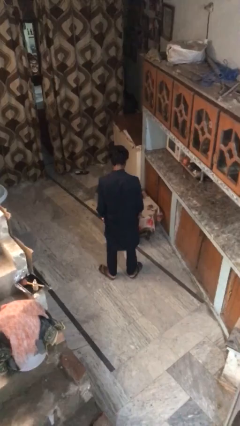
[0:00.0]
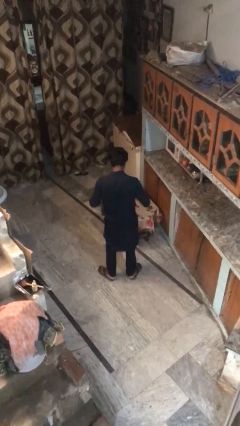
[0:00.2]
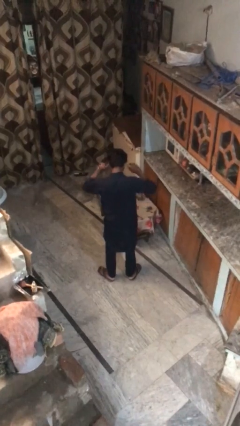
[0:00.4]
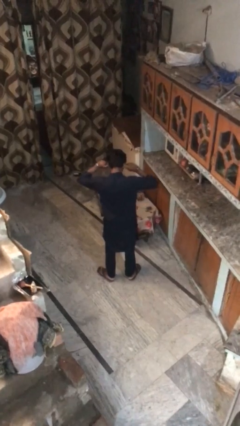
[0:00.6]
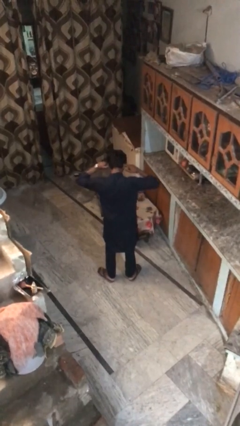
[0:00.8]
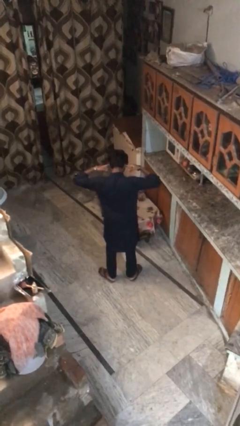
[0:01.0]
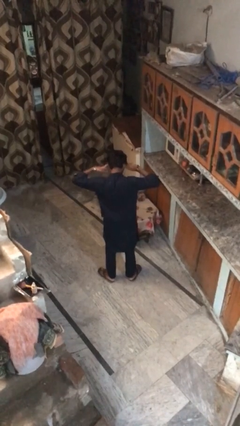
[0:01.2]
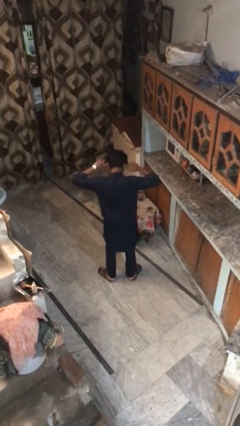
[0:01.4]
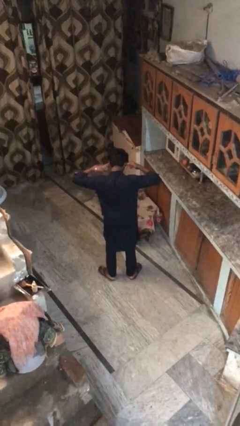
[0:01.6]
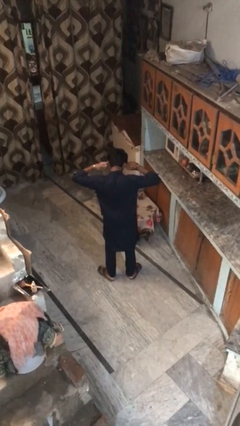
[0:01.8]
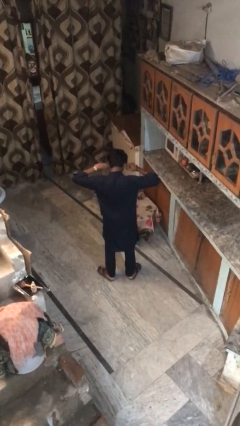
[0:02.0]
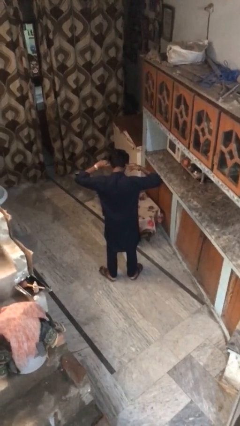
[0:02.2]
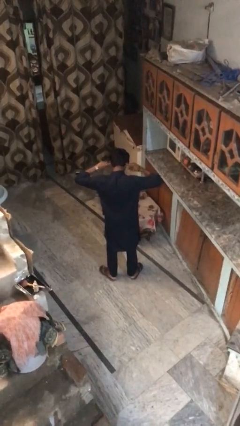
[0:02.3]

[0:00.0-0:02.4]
person puts fingers in ear

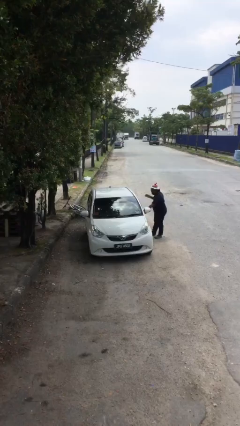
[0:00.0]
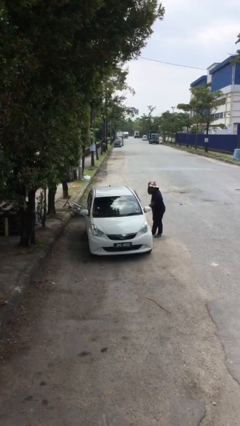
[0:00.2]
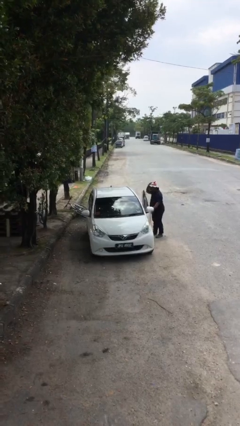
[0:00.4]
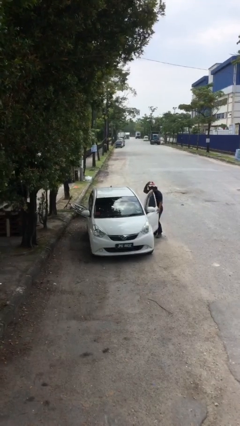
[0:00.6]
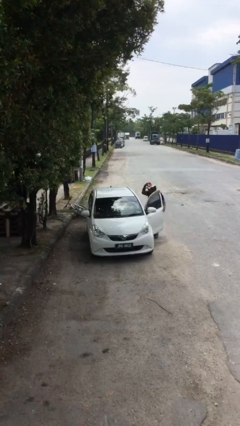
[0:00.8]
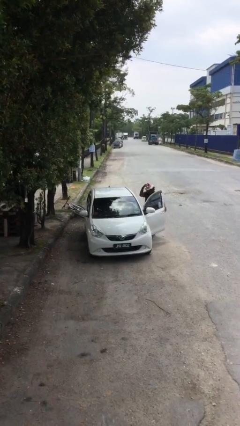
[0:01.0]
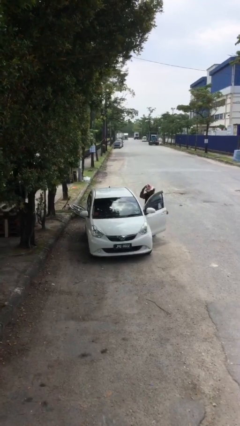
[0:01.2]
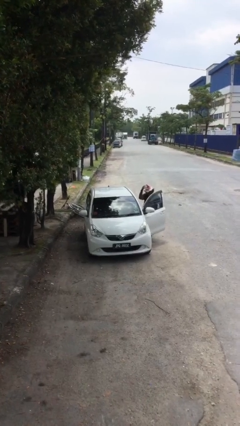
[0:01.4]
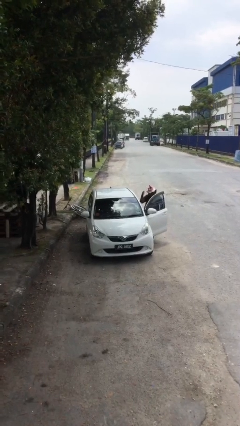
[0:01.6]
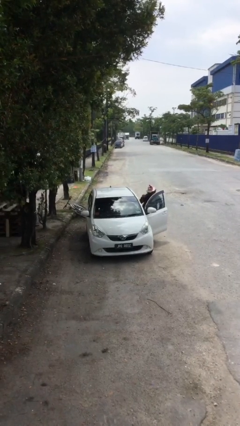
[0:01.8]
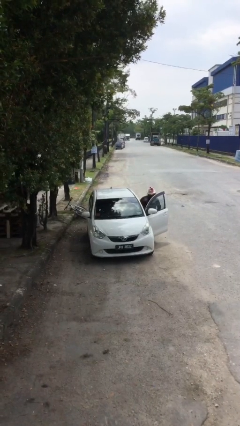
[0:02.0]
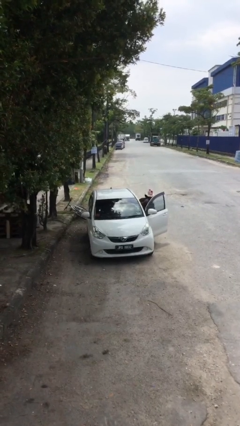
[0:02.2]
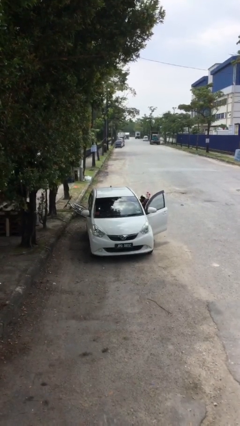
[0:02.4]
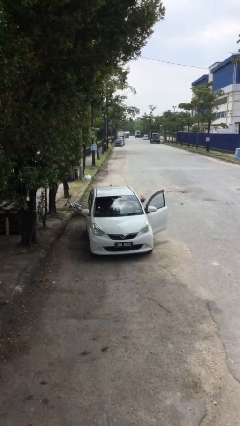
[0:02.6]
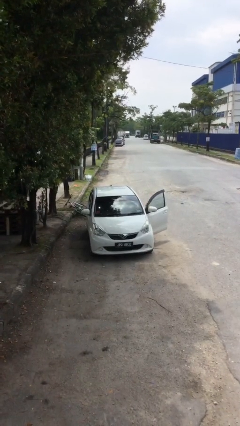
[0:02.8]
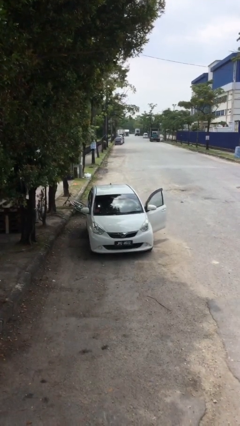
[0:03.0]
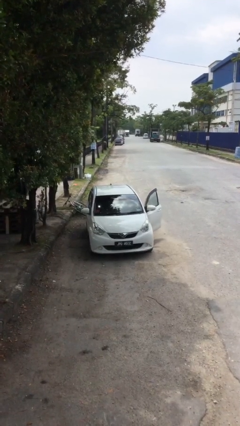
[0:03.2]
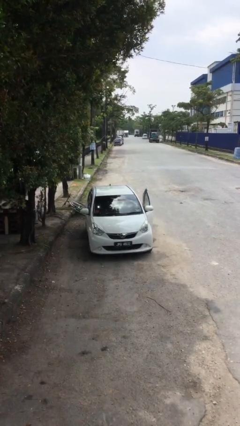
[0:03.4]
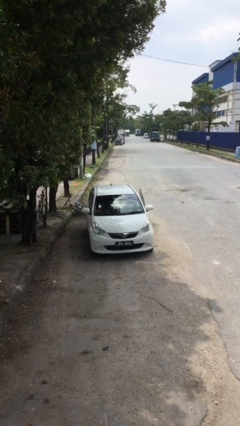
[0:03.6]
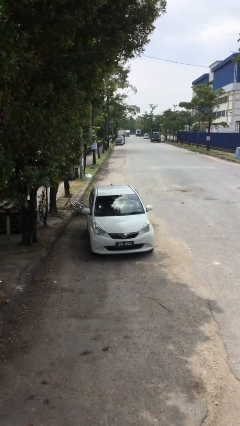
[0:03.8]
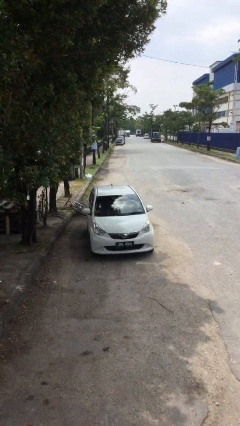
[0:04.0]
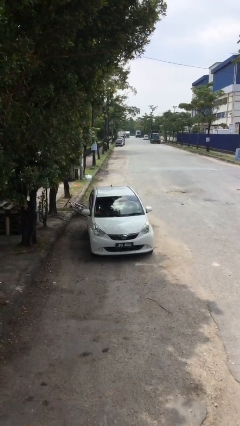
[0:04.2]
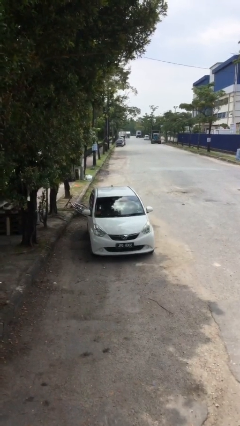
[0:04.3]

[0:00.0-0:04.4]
car picks up person

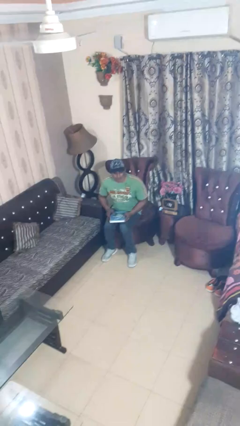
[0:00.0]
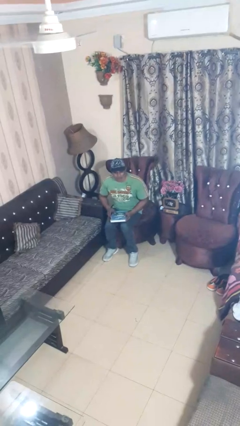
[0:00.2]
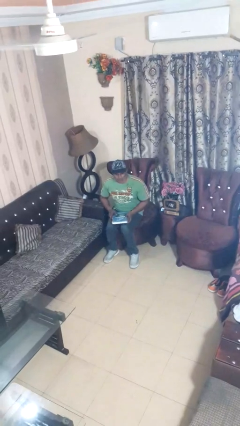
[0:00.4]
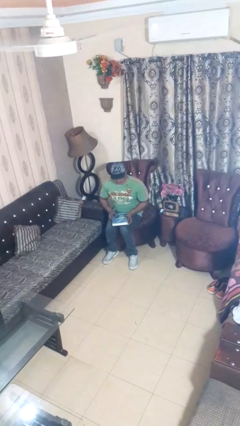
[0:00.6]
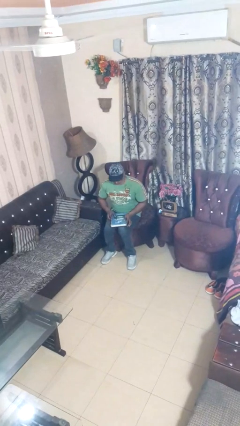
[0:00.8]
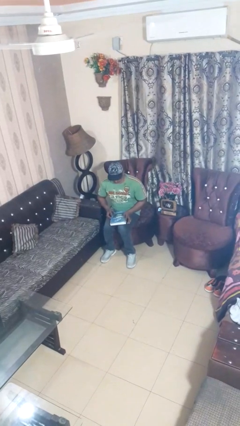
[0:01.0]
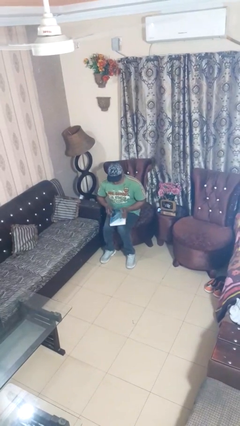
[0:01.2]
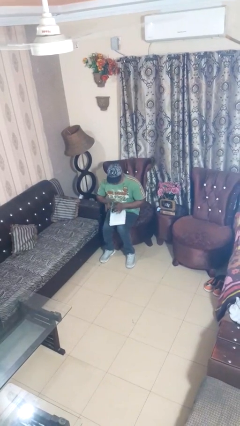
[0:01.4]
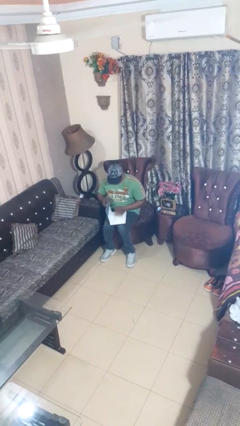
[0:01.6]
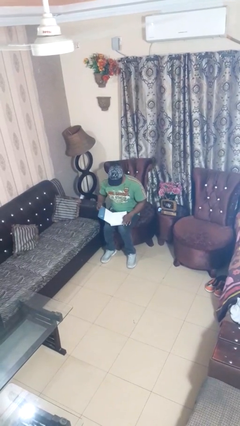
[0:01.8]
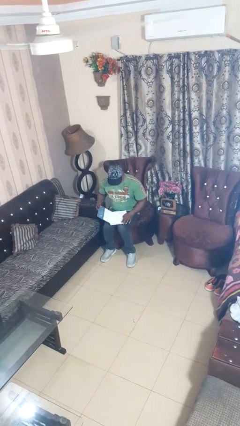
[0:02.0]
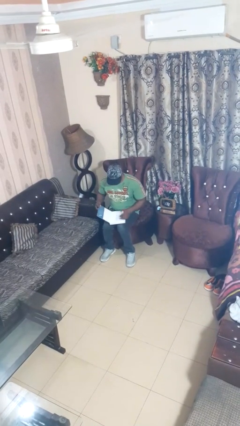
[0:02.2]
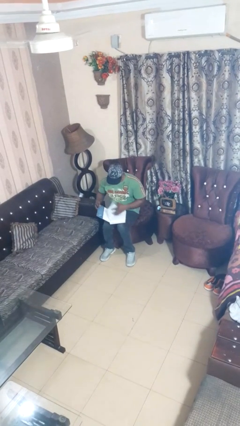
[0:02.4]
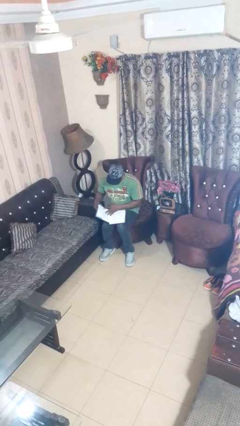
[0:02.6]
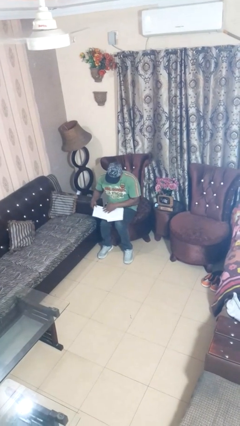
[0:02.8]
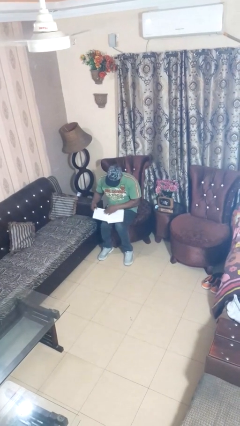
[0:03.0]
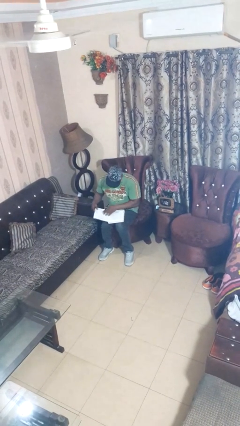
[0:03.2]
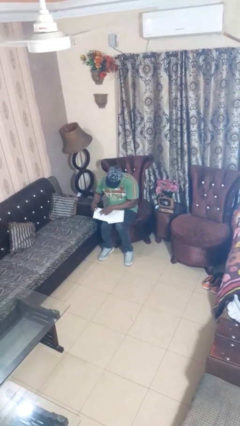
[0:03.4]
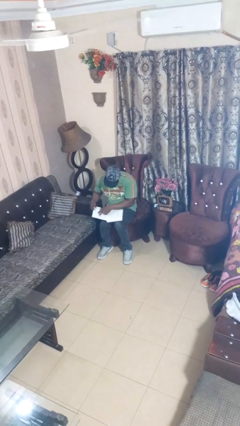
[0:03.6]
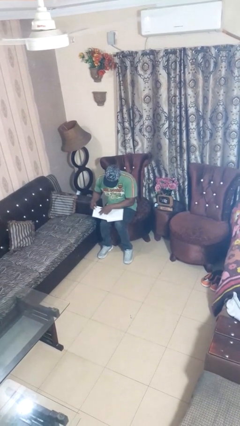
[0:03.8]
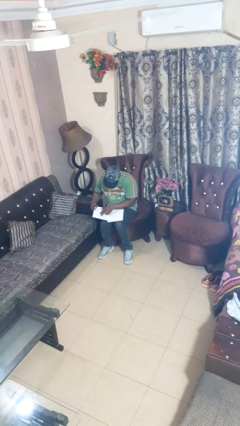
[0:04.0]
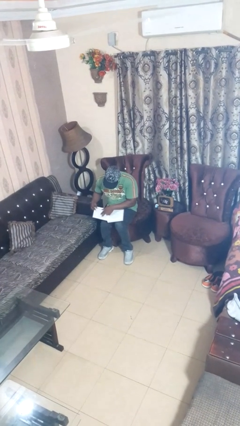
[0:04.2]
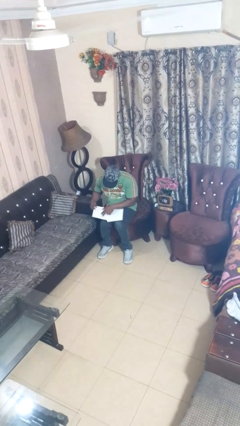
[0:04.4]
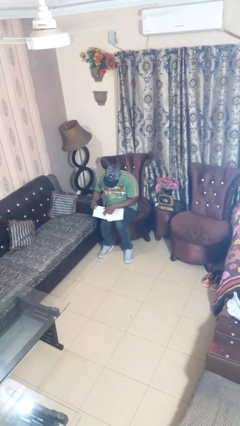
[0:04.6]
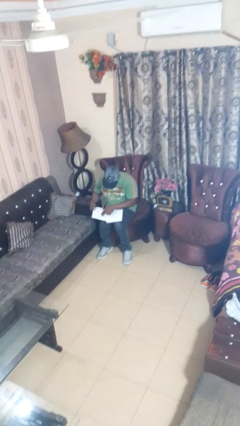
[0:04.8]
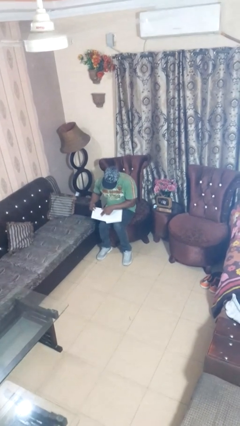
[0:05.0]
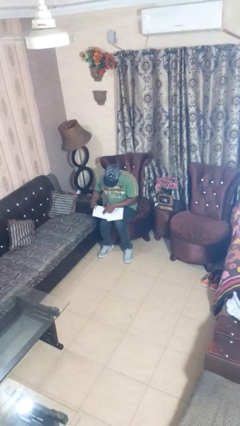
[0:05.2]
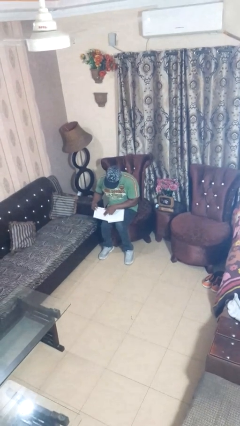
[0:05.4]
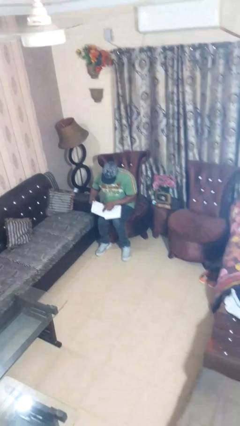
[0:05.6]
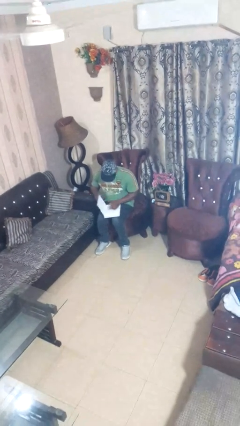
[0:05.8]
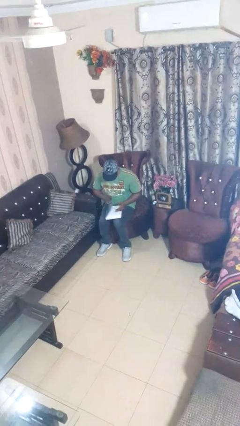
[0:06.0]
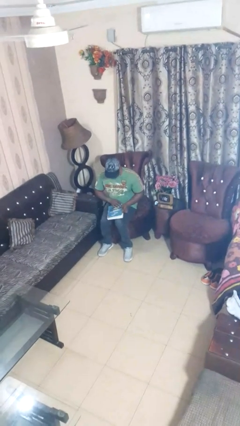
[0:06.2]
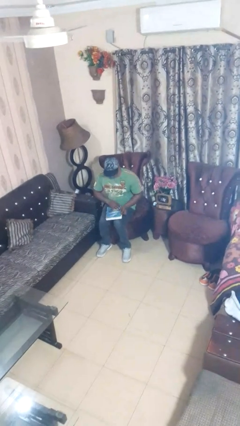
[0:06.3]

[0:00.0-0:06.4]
person reads magazine

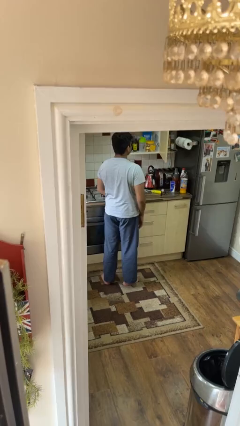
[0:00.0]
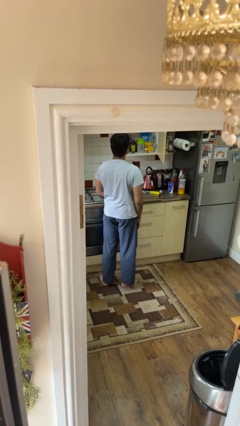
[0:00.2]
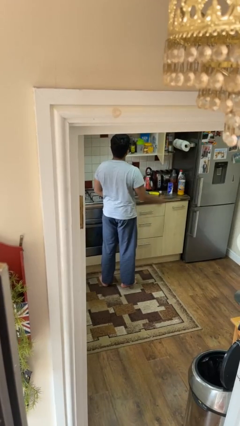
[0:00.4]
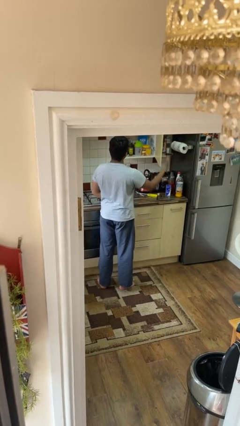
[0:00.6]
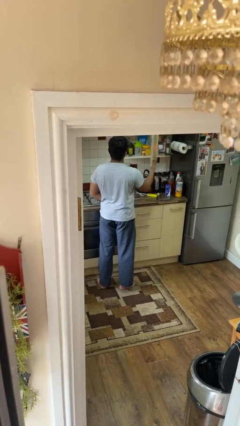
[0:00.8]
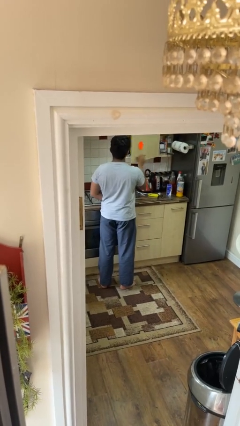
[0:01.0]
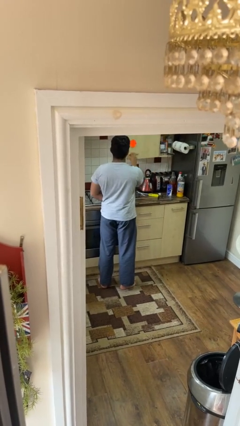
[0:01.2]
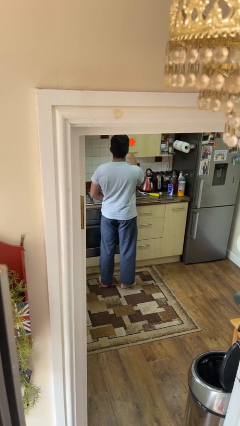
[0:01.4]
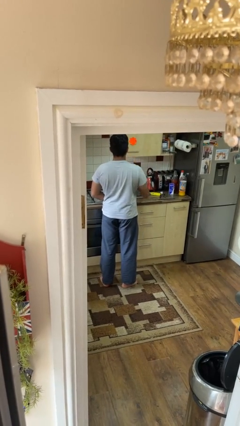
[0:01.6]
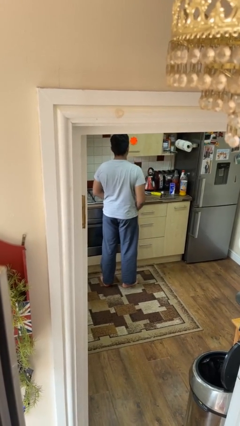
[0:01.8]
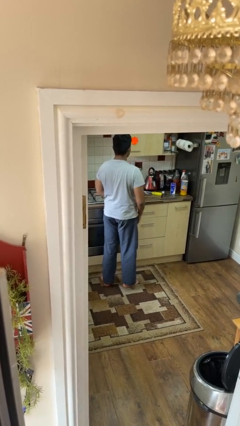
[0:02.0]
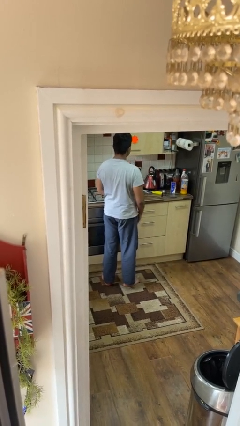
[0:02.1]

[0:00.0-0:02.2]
person closes cabinet

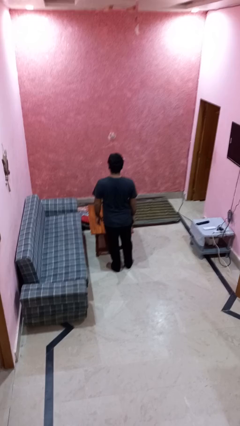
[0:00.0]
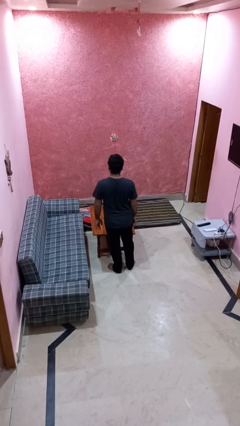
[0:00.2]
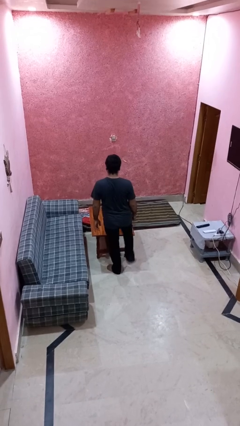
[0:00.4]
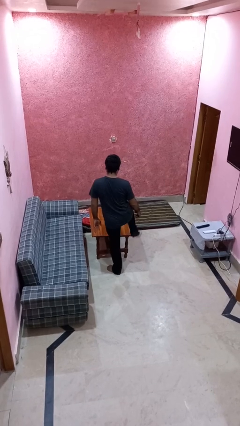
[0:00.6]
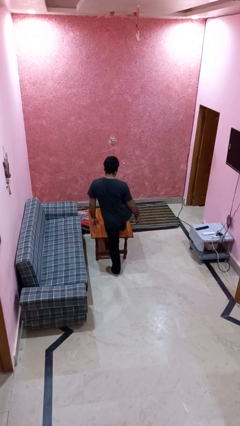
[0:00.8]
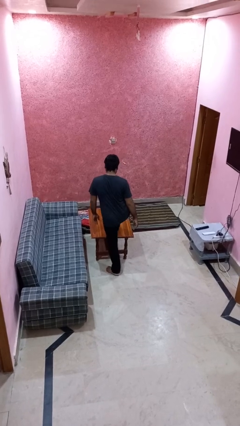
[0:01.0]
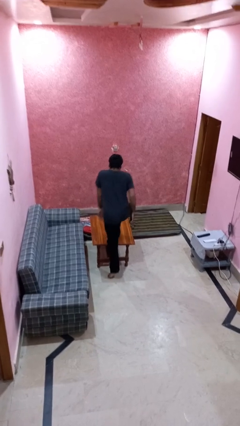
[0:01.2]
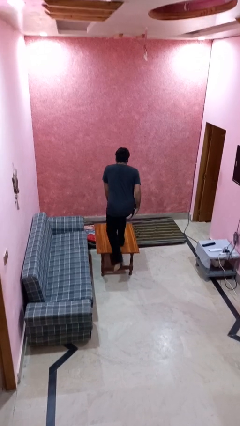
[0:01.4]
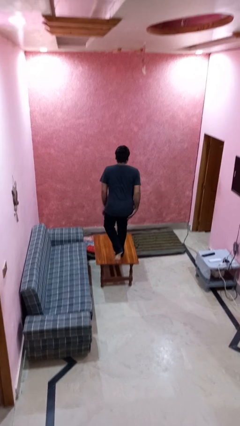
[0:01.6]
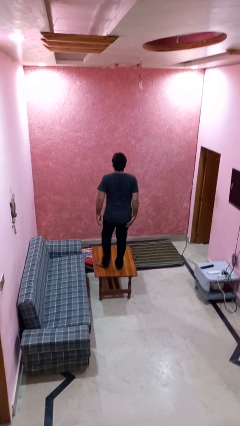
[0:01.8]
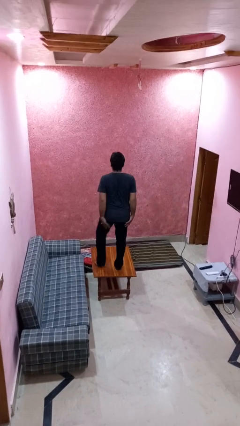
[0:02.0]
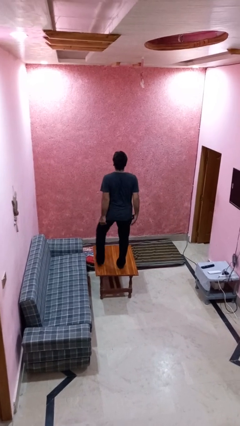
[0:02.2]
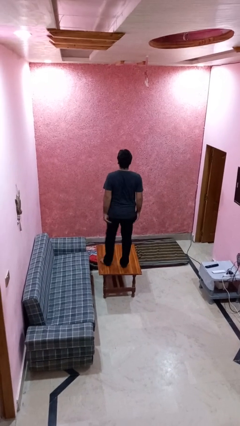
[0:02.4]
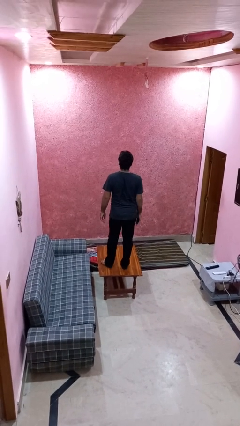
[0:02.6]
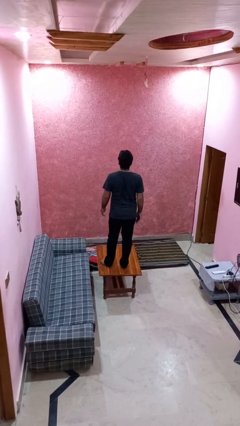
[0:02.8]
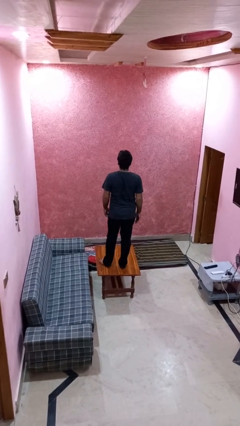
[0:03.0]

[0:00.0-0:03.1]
person climbs on table
